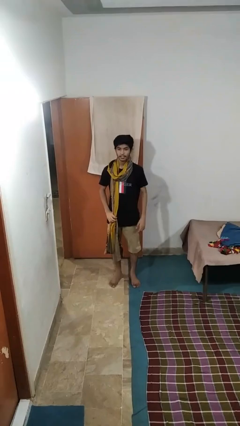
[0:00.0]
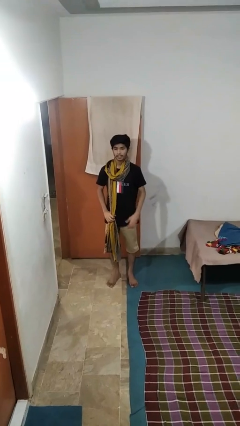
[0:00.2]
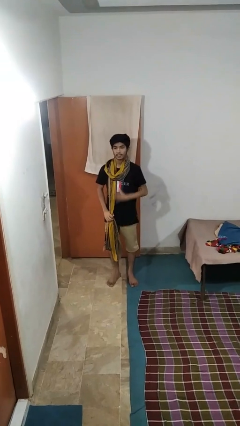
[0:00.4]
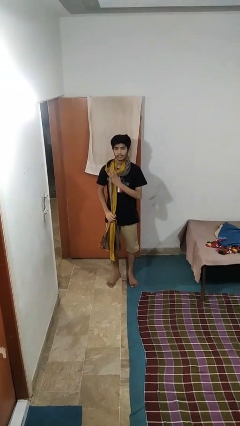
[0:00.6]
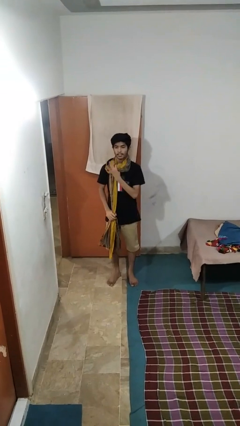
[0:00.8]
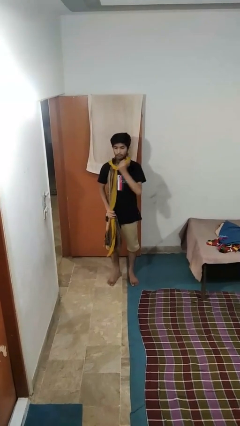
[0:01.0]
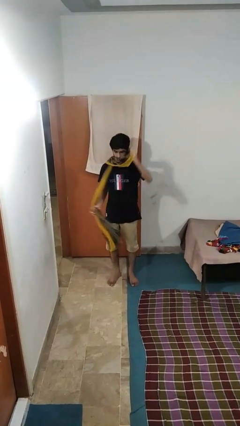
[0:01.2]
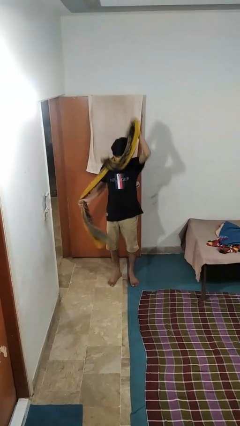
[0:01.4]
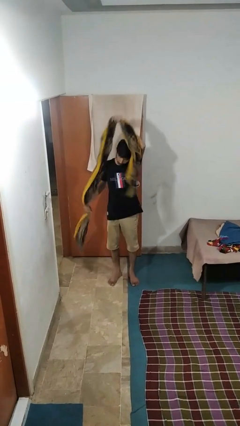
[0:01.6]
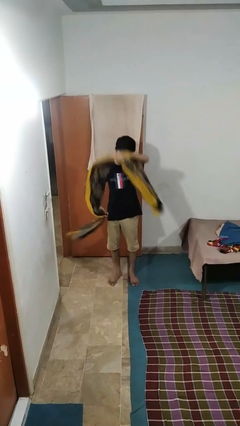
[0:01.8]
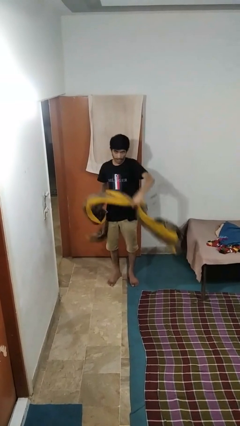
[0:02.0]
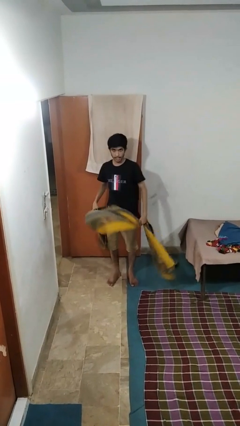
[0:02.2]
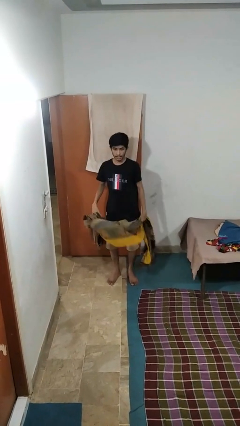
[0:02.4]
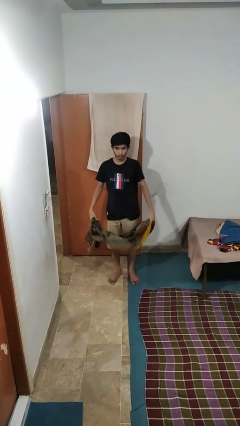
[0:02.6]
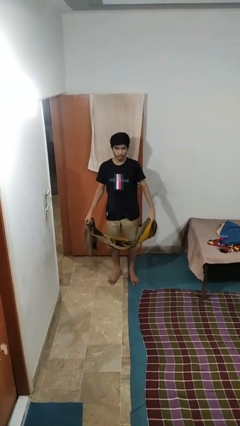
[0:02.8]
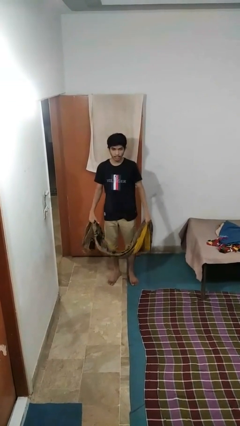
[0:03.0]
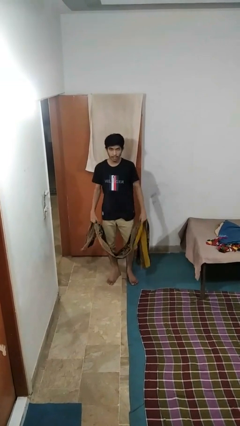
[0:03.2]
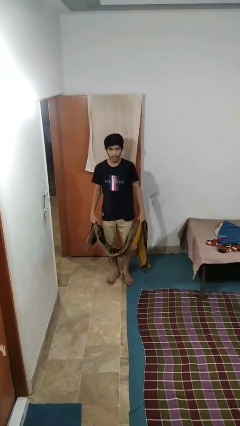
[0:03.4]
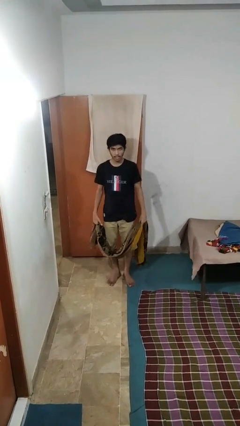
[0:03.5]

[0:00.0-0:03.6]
person takes off scarf

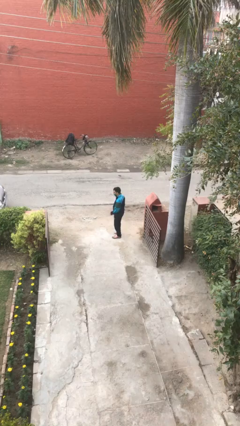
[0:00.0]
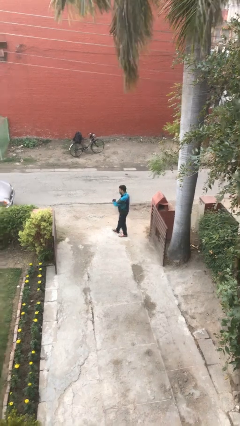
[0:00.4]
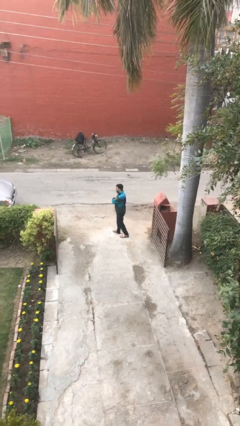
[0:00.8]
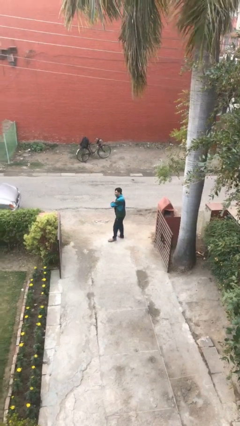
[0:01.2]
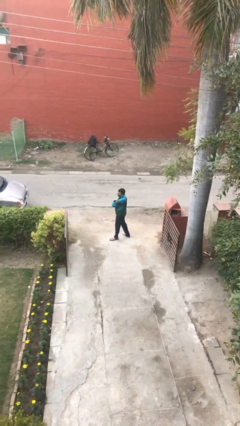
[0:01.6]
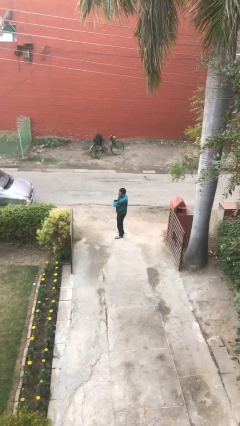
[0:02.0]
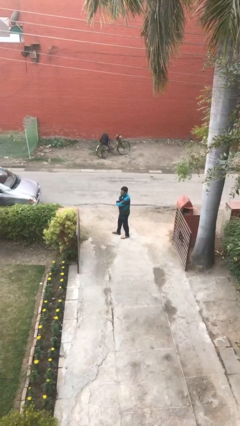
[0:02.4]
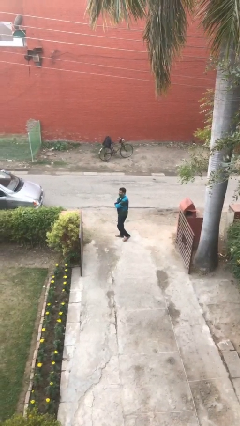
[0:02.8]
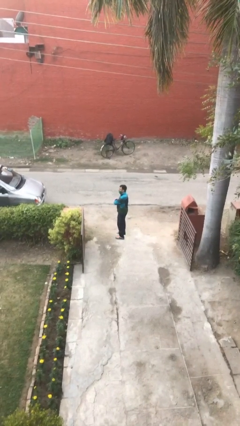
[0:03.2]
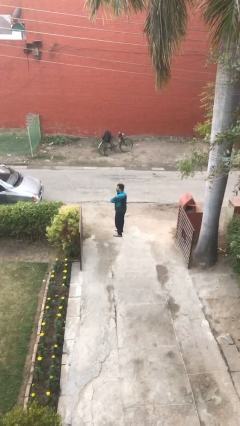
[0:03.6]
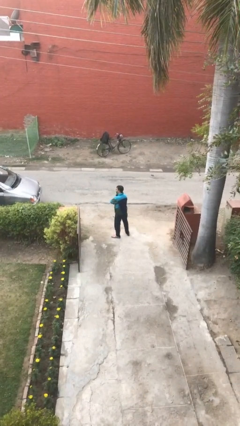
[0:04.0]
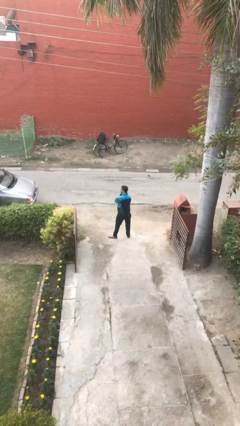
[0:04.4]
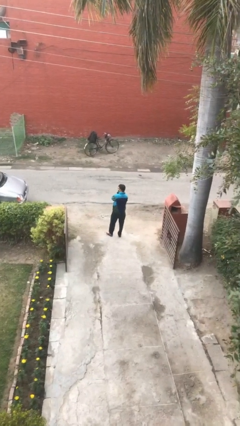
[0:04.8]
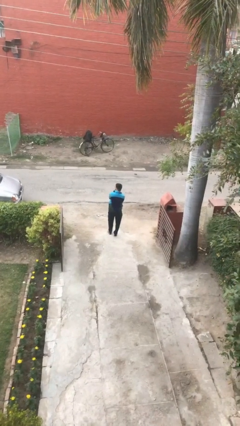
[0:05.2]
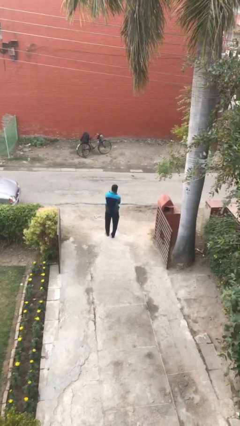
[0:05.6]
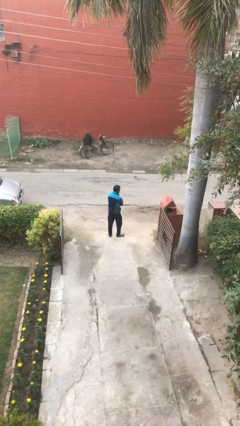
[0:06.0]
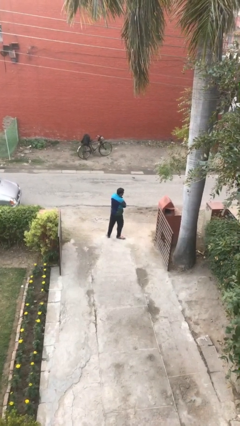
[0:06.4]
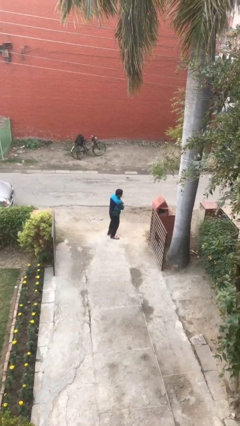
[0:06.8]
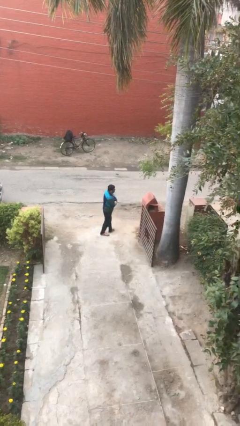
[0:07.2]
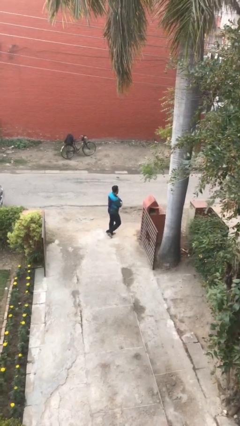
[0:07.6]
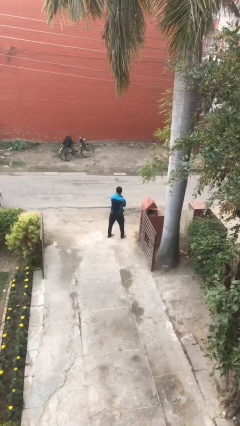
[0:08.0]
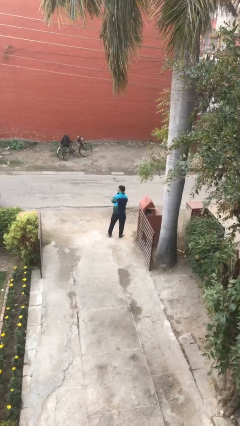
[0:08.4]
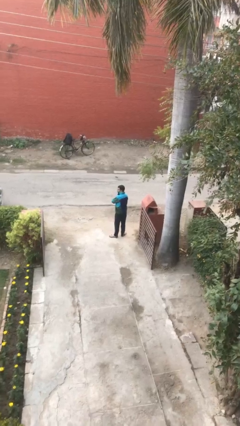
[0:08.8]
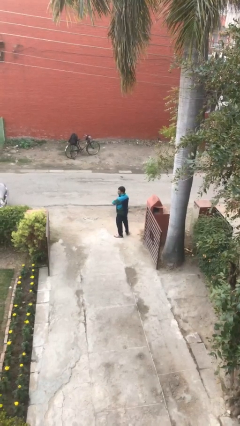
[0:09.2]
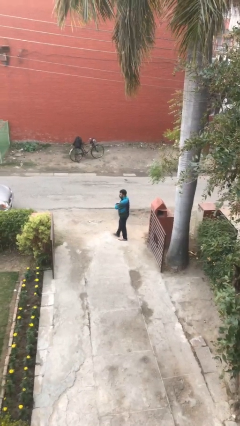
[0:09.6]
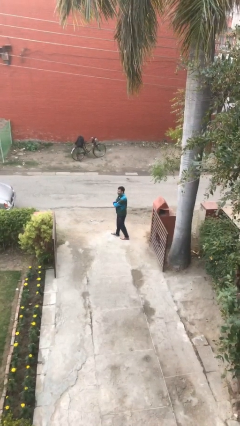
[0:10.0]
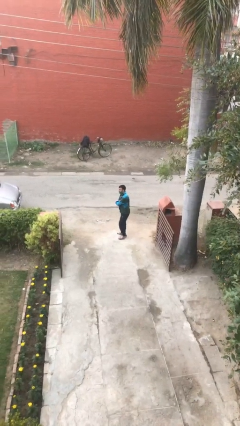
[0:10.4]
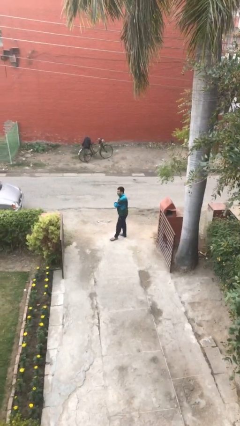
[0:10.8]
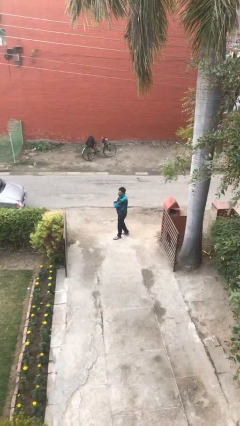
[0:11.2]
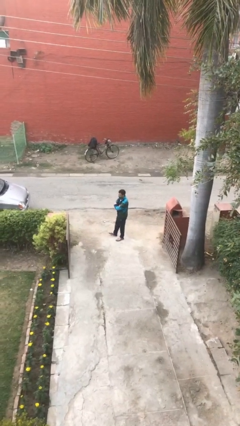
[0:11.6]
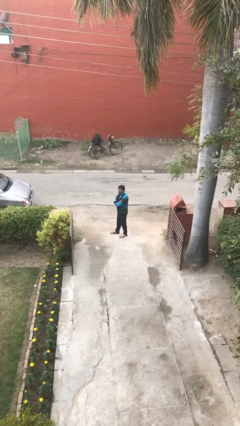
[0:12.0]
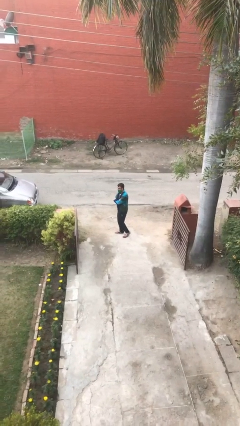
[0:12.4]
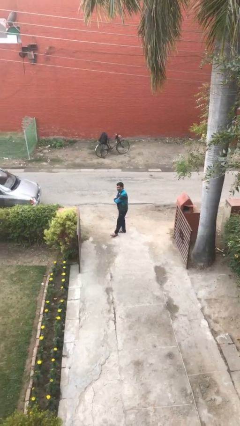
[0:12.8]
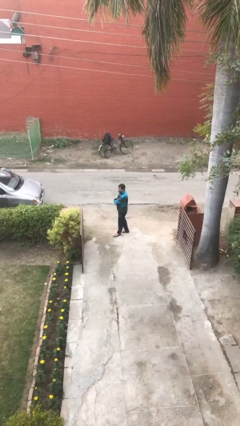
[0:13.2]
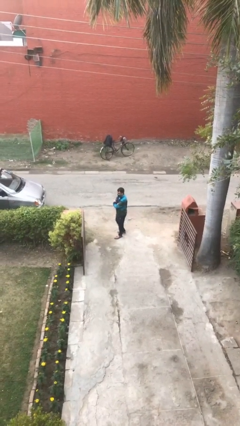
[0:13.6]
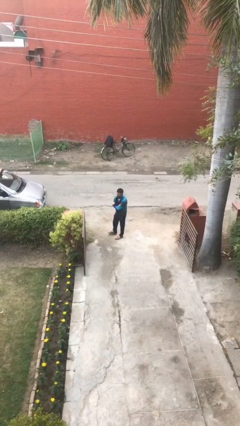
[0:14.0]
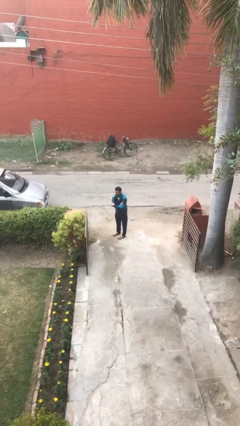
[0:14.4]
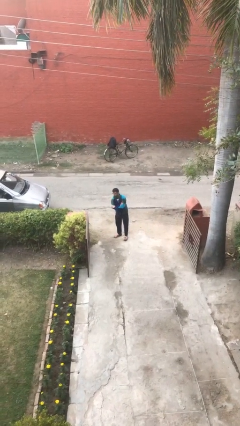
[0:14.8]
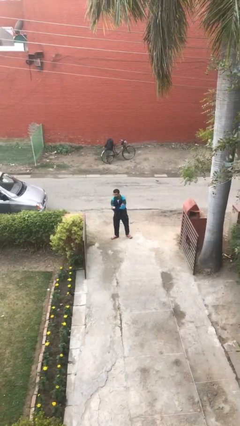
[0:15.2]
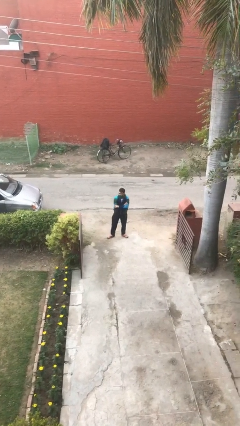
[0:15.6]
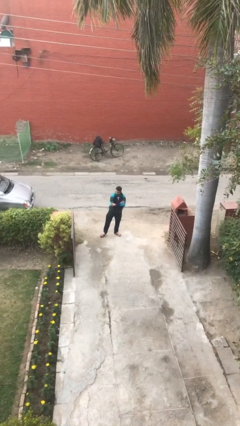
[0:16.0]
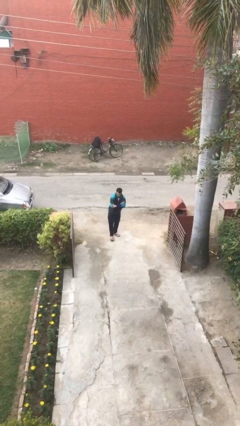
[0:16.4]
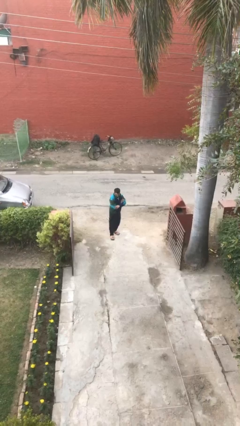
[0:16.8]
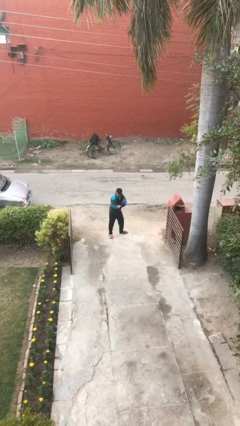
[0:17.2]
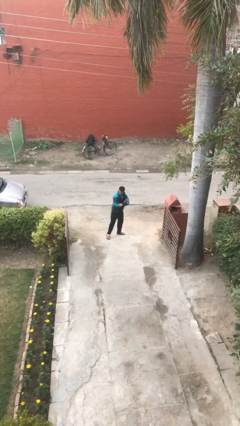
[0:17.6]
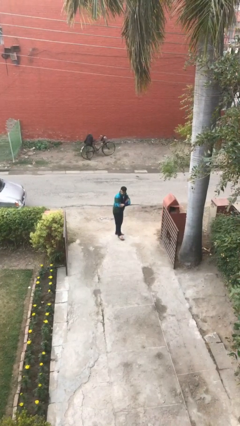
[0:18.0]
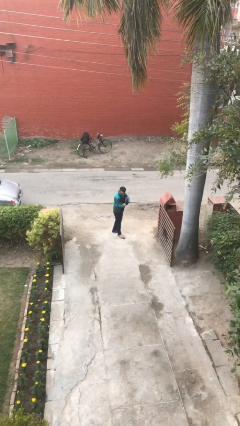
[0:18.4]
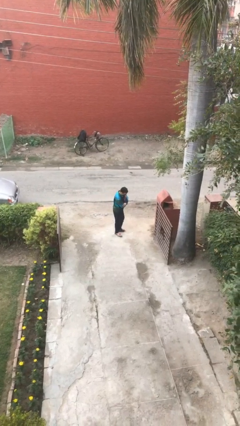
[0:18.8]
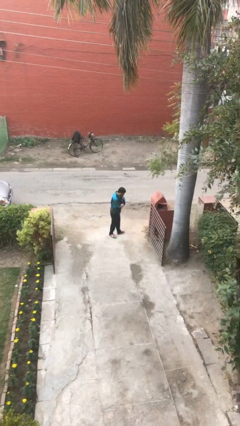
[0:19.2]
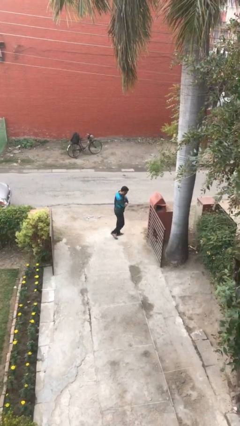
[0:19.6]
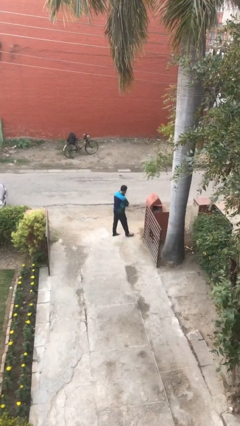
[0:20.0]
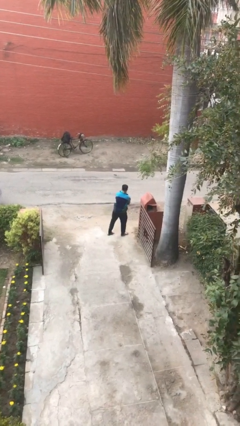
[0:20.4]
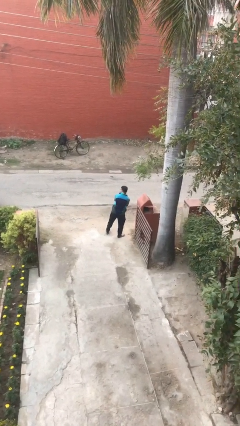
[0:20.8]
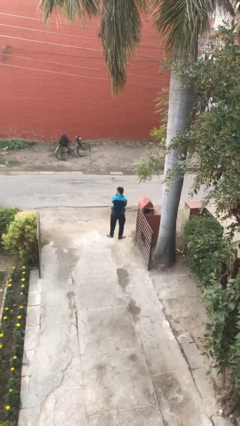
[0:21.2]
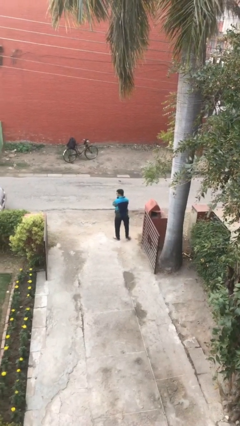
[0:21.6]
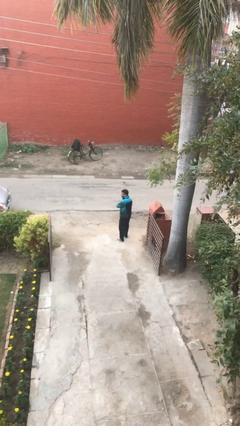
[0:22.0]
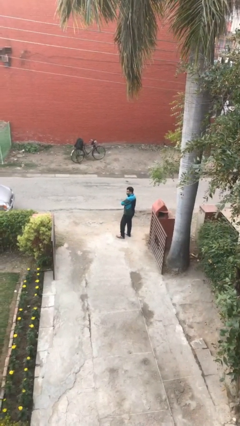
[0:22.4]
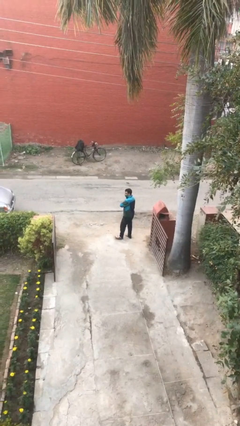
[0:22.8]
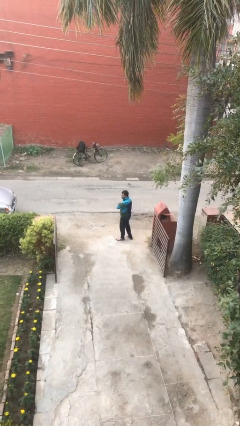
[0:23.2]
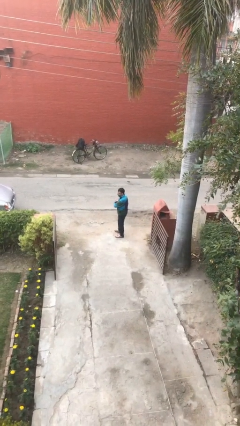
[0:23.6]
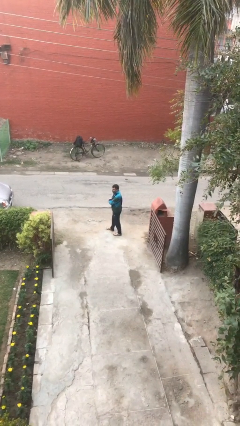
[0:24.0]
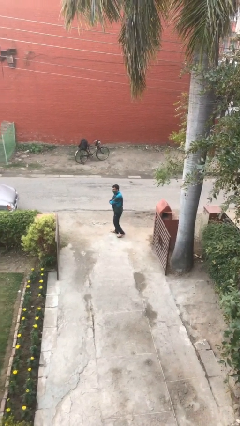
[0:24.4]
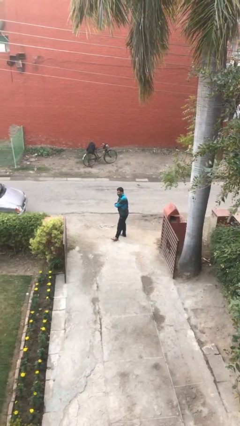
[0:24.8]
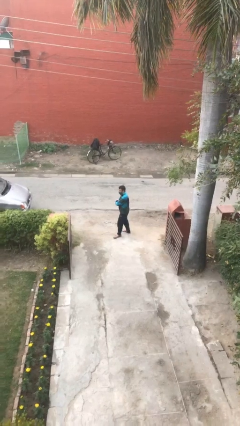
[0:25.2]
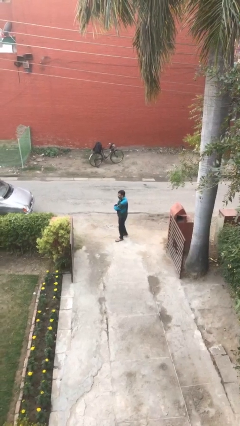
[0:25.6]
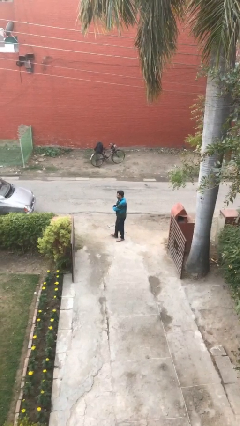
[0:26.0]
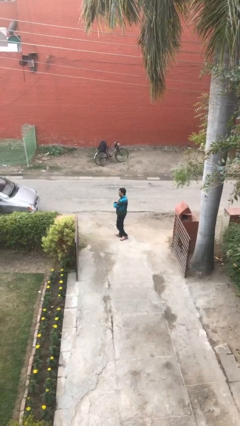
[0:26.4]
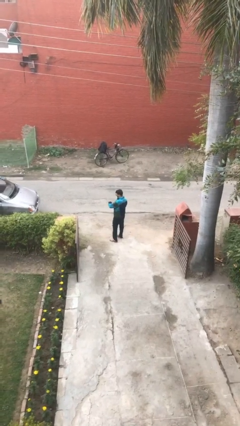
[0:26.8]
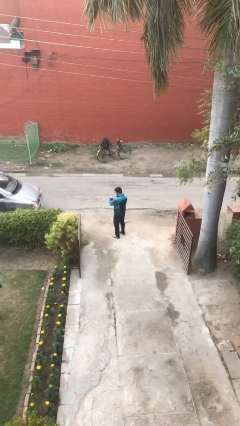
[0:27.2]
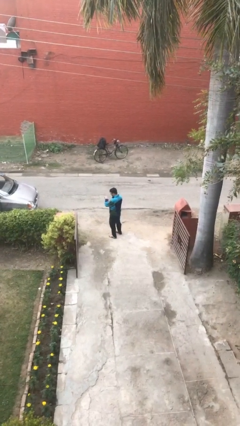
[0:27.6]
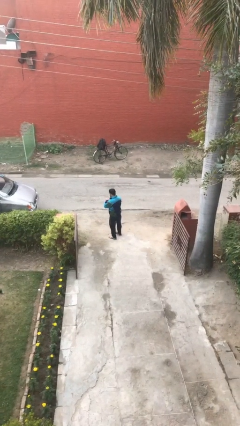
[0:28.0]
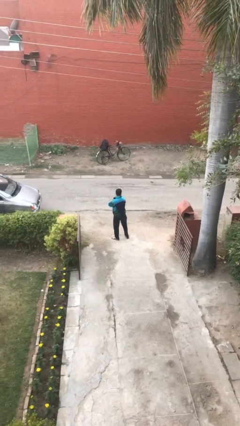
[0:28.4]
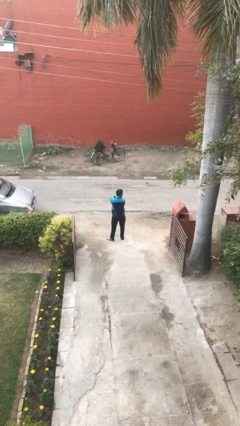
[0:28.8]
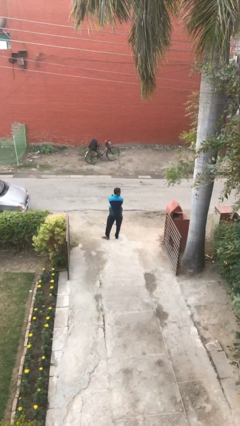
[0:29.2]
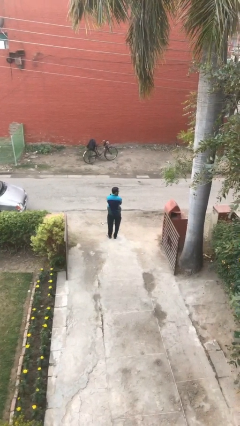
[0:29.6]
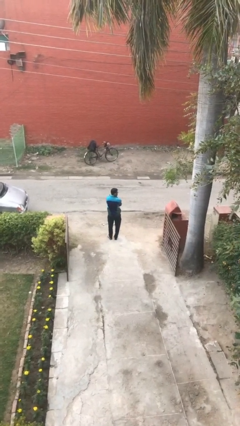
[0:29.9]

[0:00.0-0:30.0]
person walks
